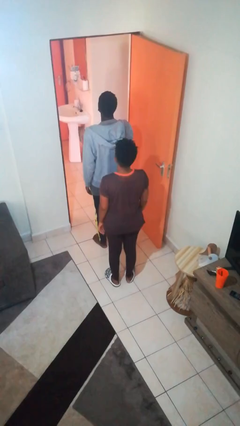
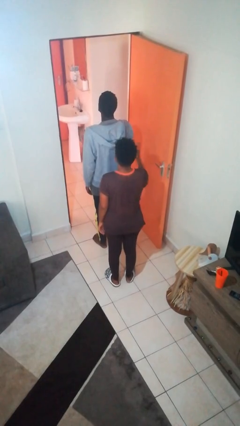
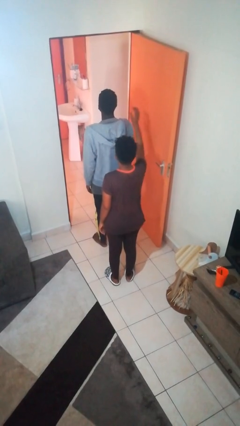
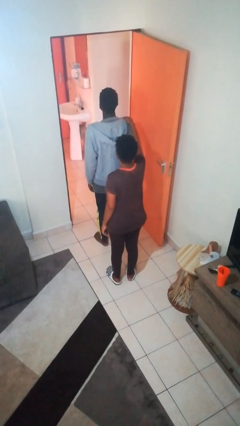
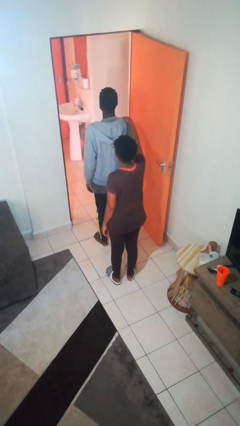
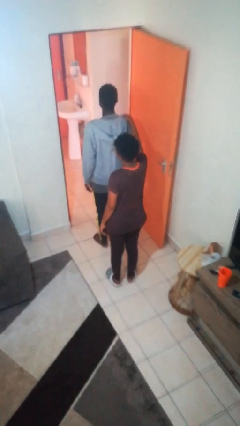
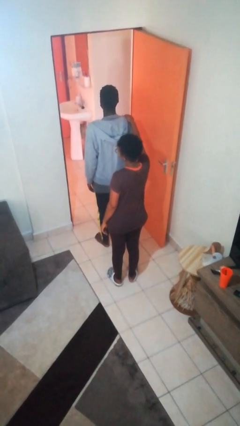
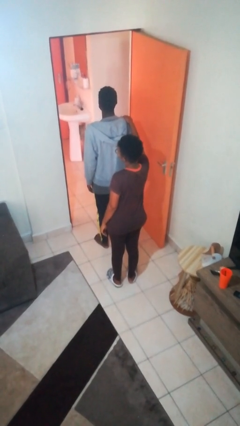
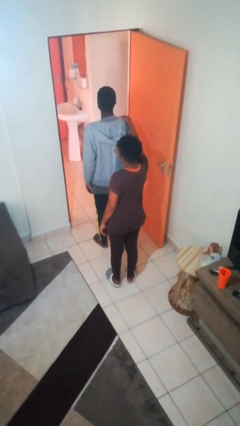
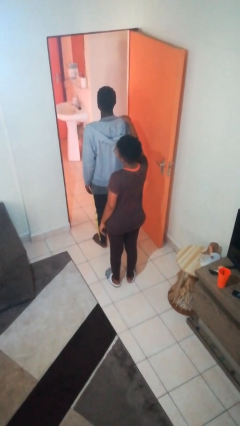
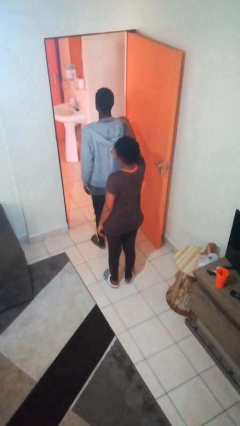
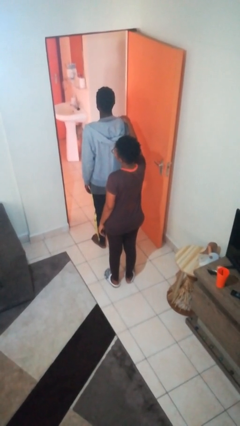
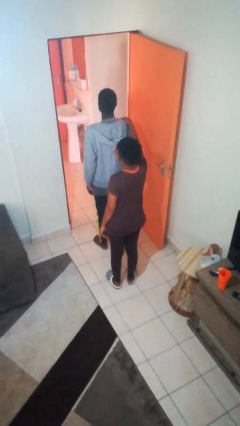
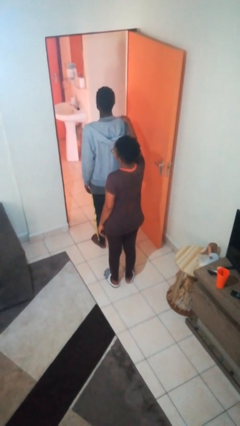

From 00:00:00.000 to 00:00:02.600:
person grabs person by shoulder

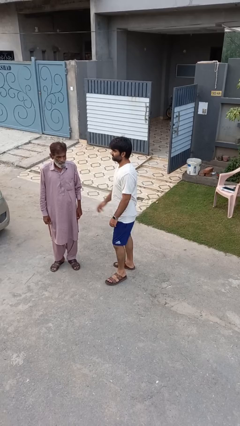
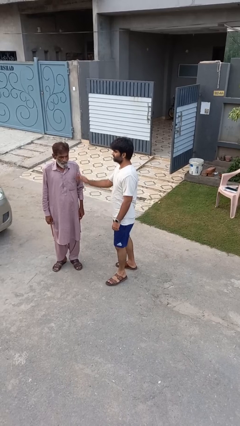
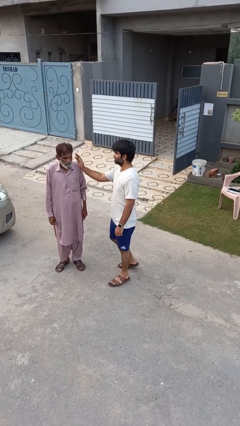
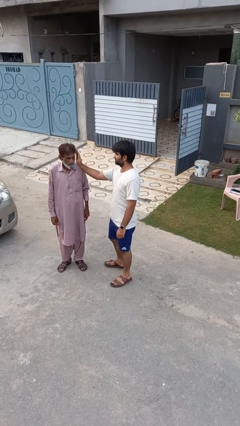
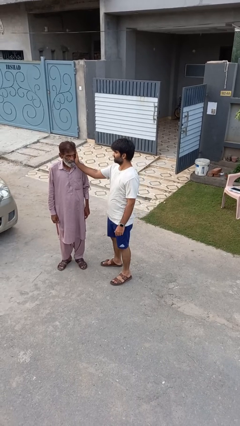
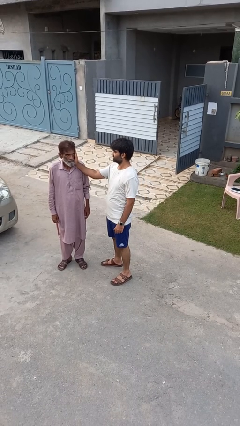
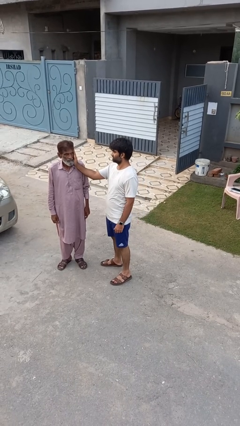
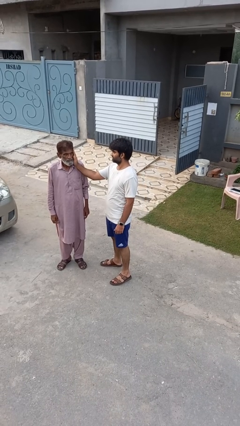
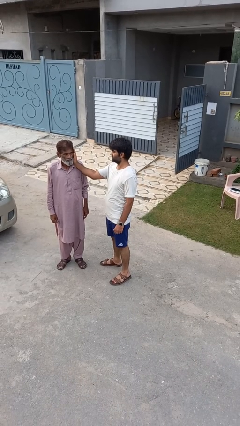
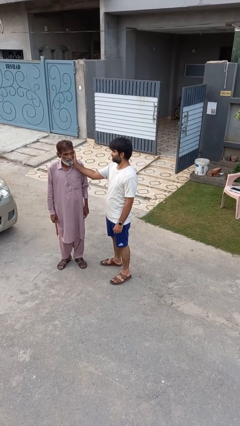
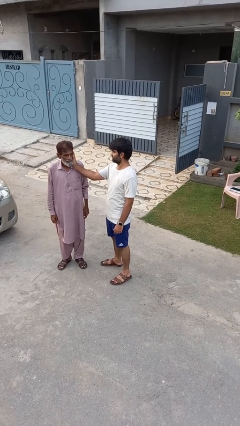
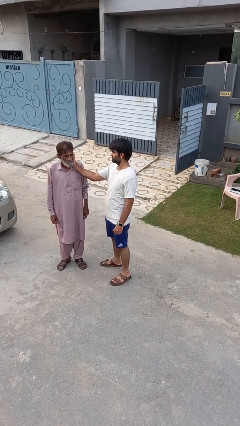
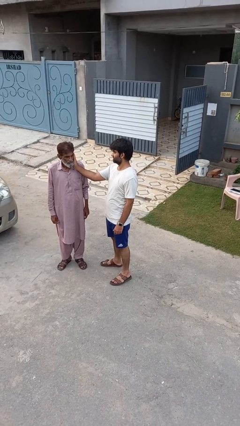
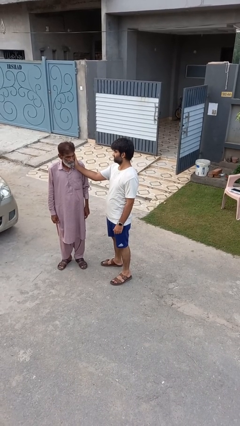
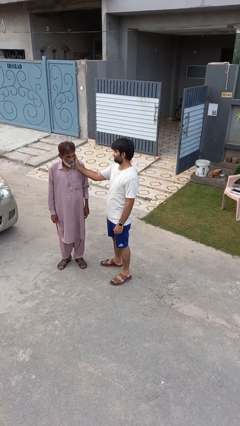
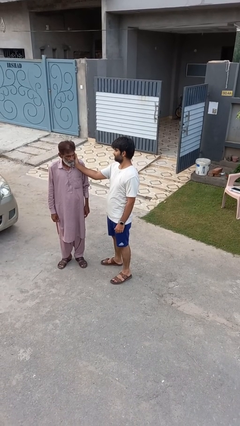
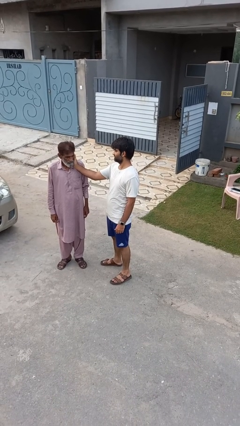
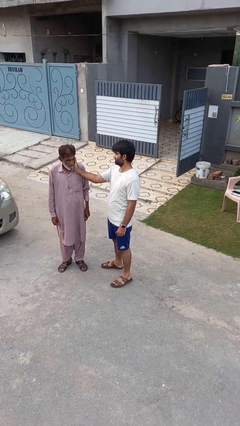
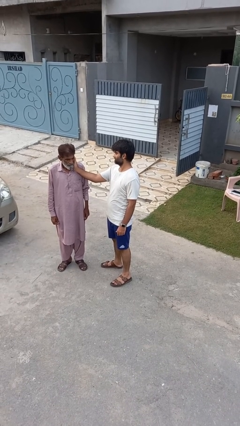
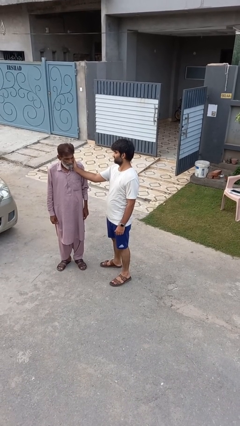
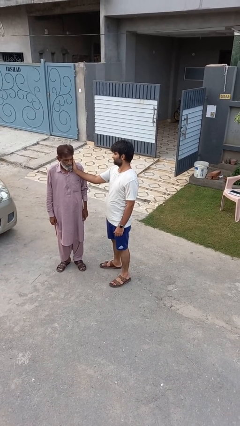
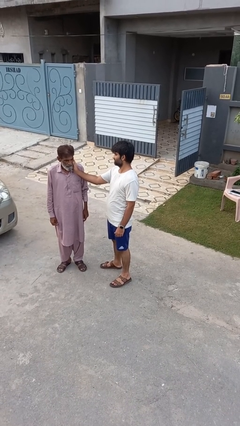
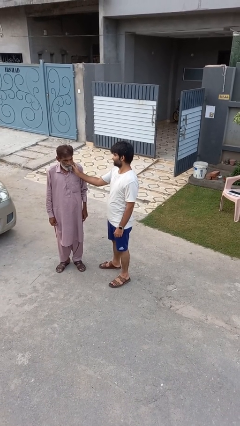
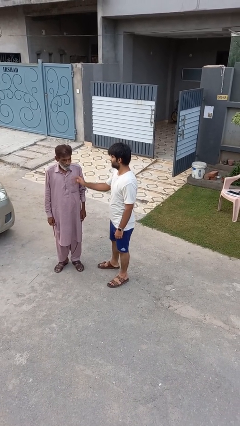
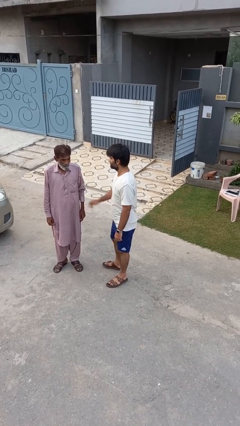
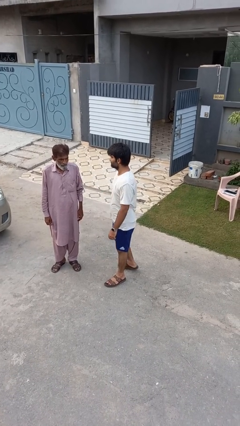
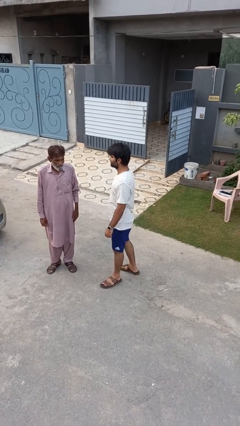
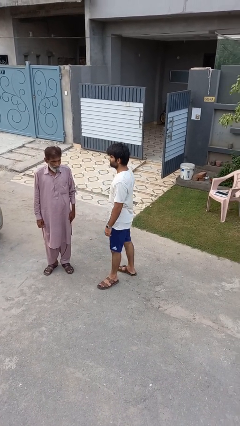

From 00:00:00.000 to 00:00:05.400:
person touches face of person

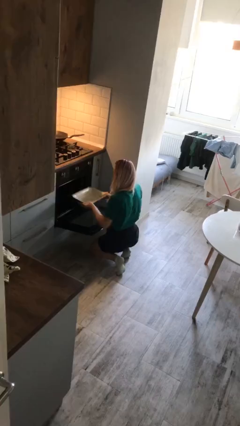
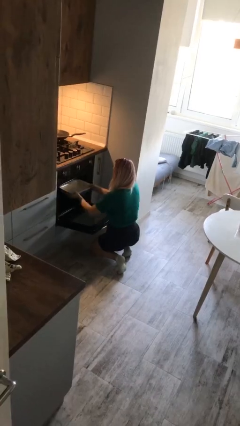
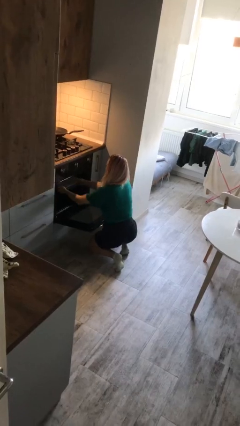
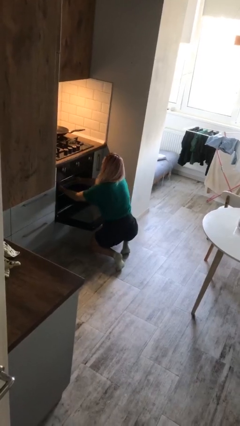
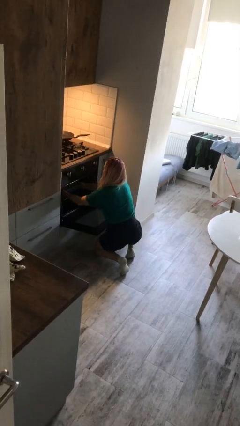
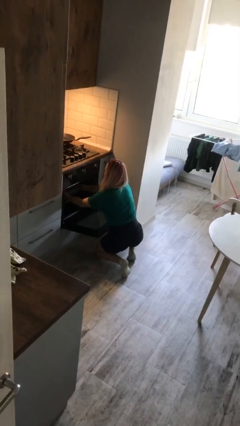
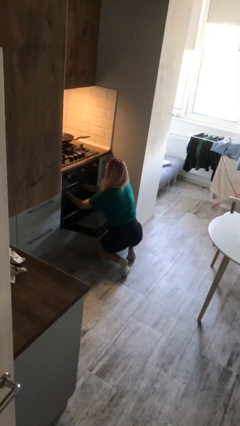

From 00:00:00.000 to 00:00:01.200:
person puts object into oven

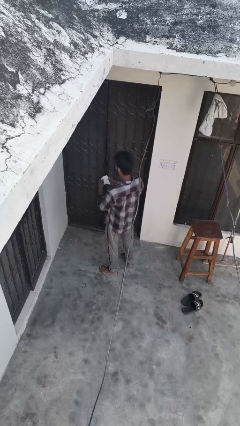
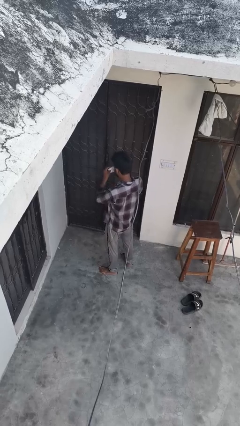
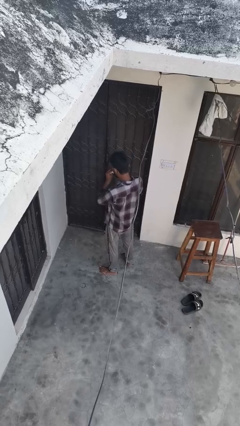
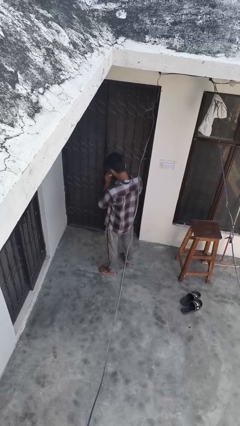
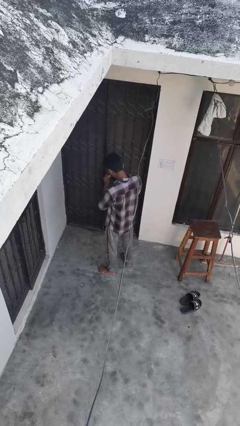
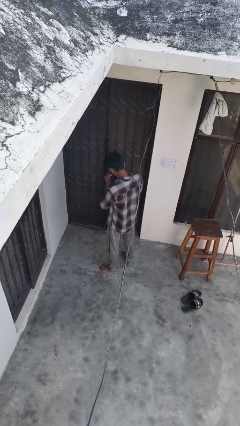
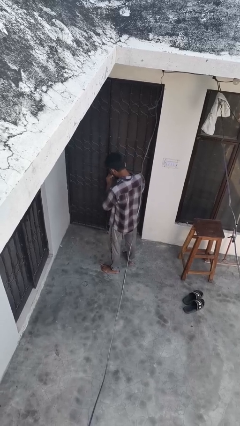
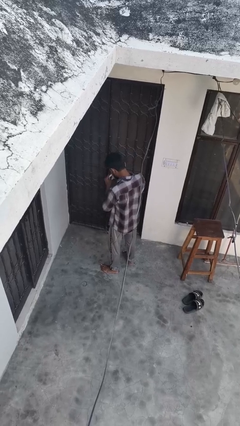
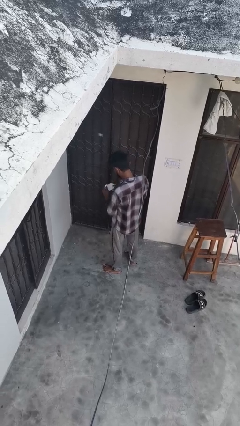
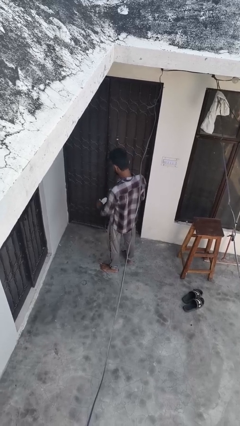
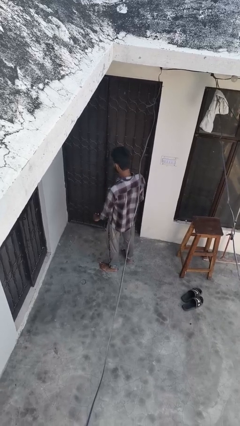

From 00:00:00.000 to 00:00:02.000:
person wipes mouth with napkin

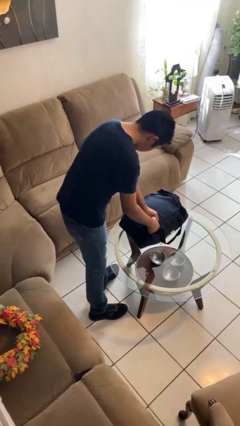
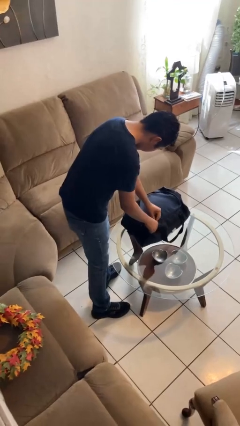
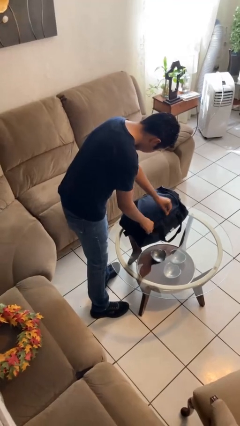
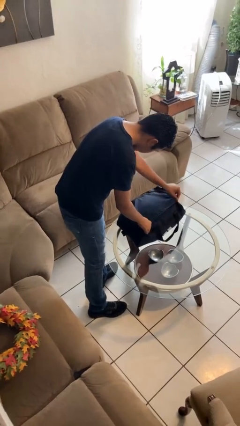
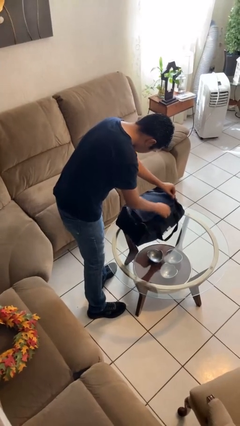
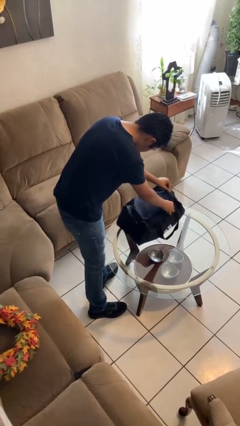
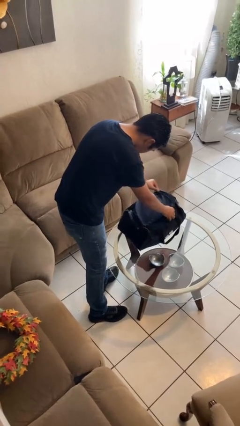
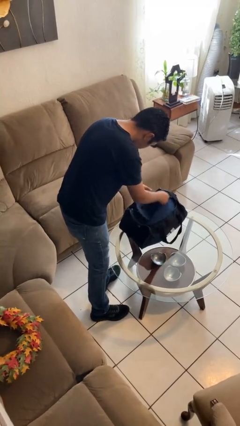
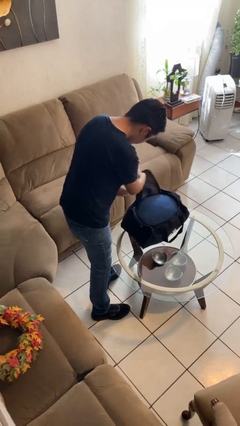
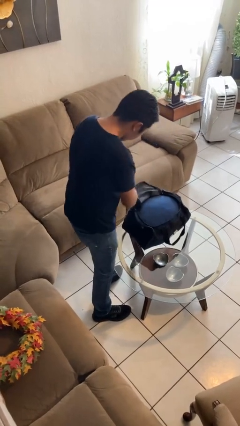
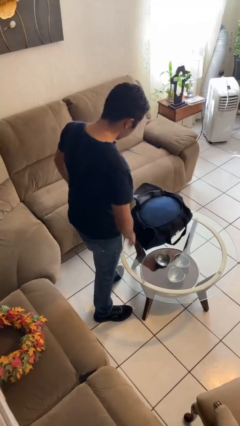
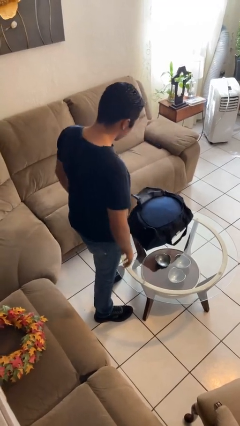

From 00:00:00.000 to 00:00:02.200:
person opens suitcase

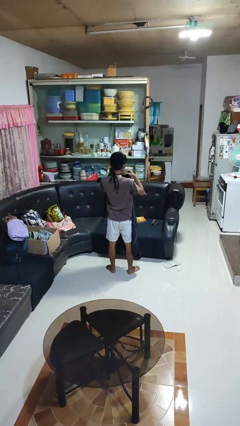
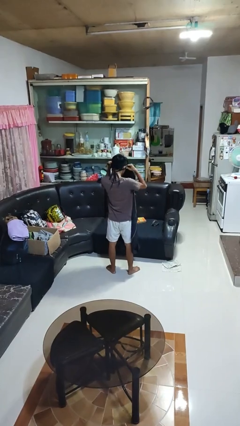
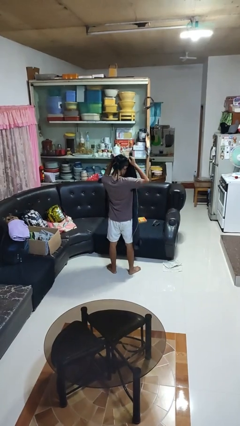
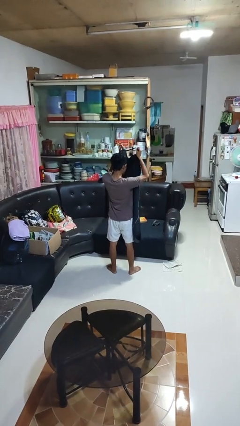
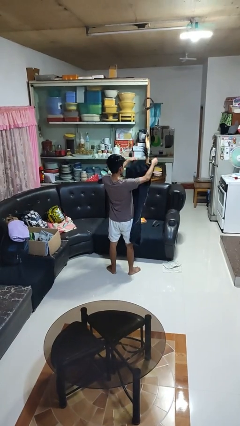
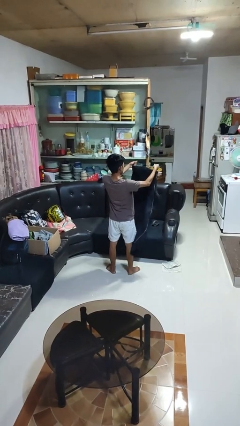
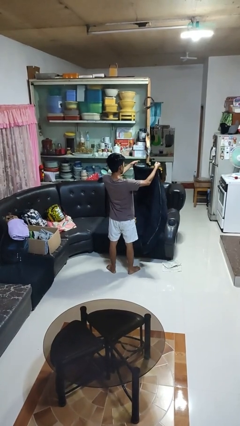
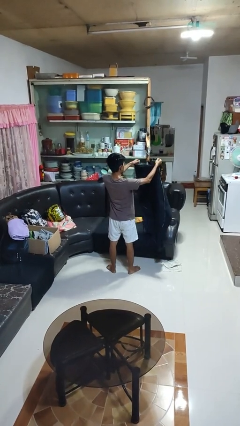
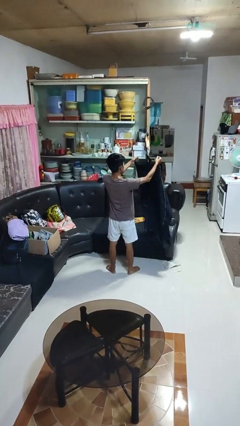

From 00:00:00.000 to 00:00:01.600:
person takes off apron

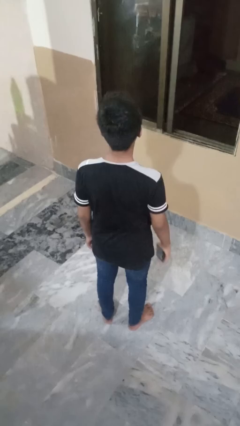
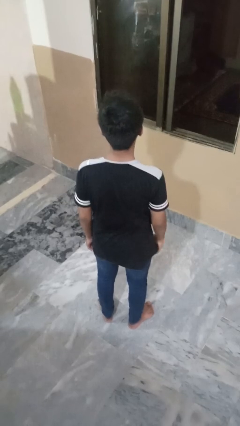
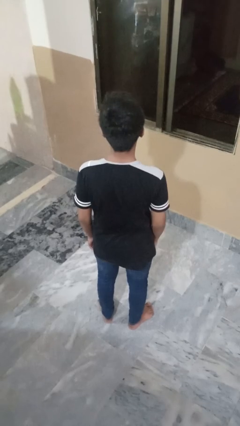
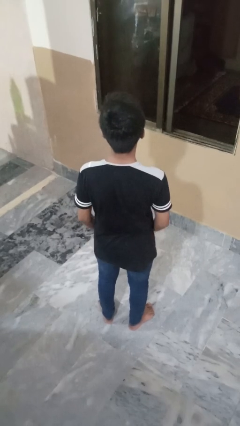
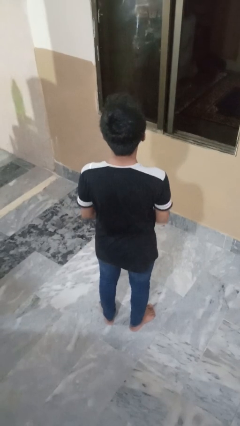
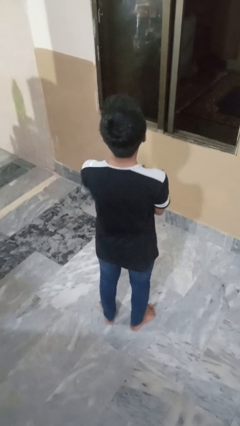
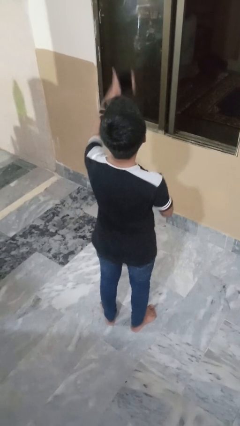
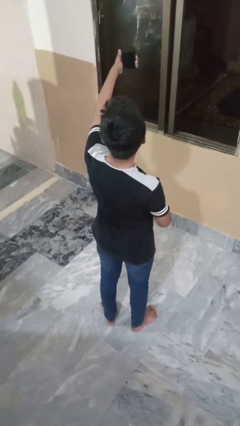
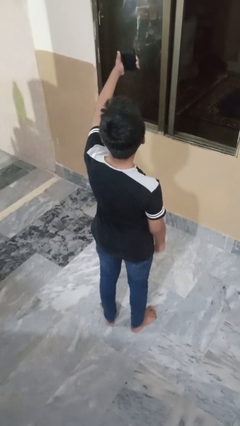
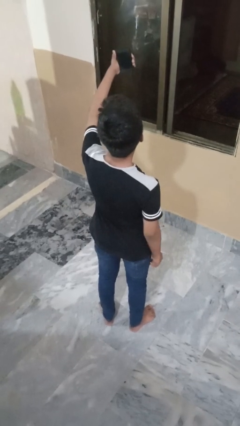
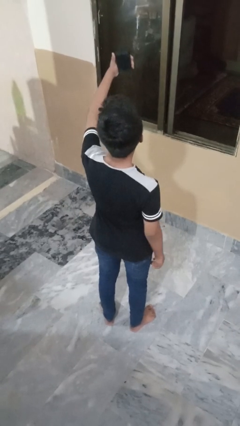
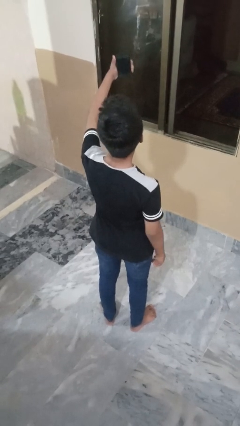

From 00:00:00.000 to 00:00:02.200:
person takes selfie
